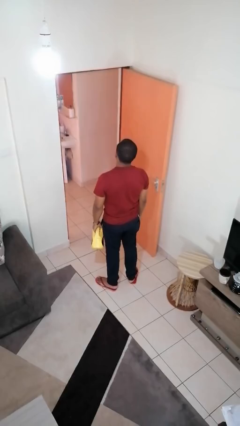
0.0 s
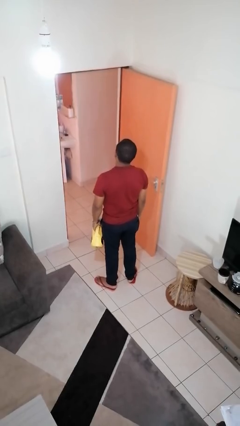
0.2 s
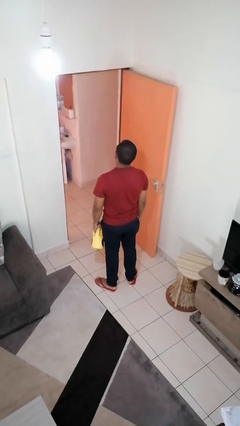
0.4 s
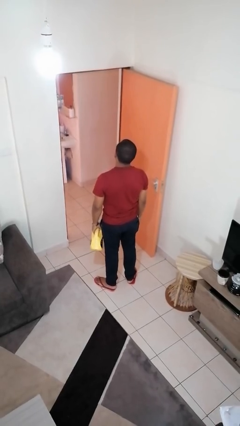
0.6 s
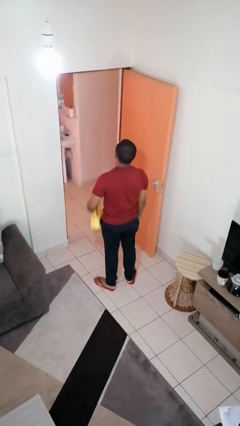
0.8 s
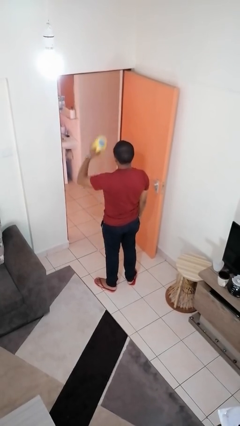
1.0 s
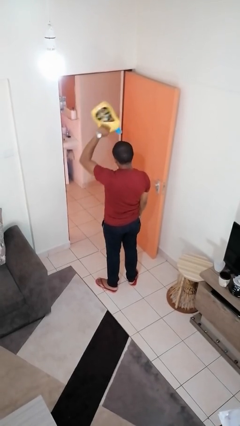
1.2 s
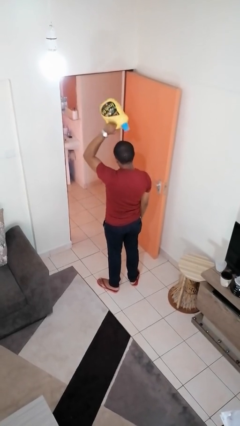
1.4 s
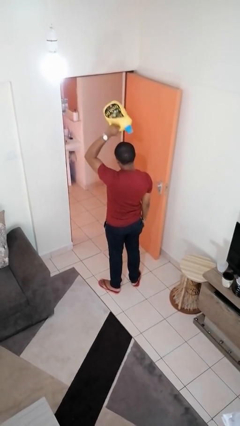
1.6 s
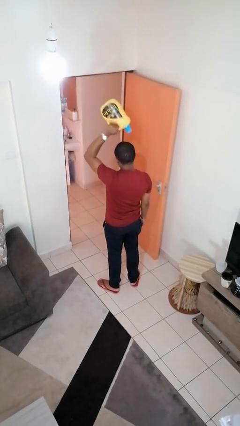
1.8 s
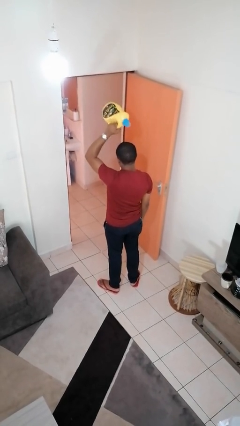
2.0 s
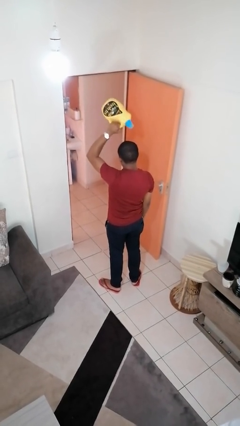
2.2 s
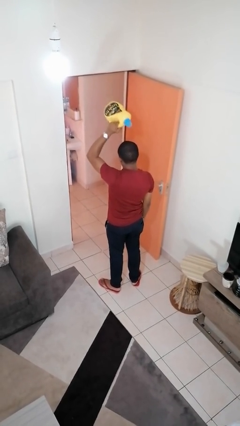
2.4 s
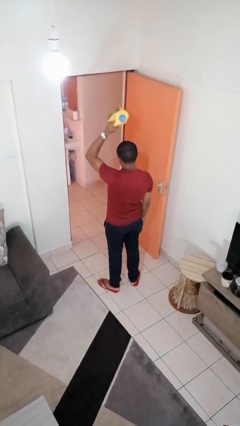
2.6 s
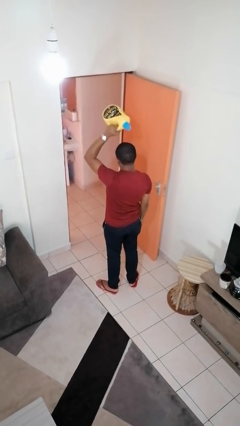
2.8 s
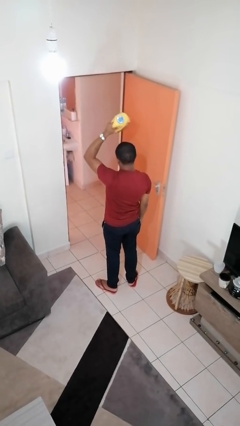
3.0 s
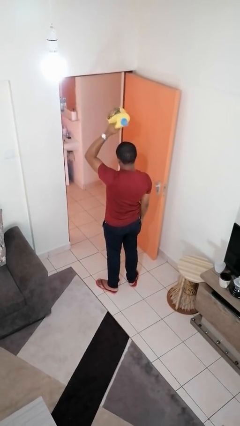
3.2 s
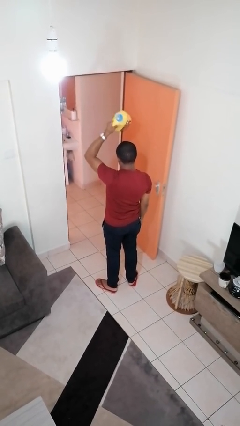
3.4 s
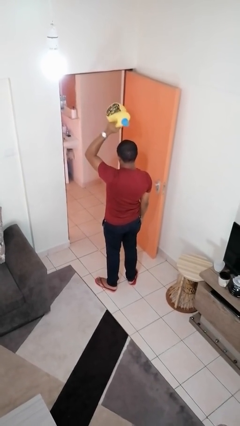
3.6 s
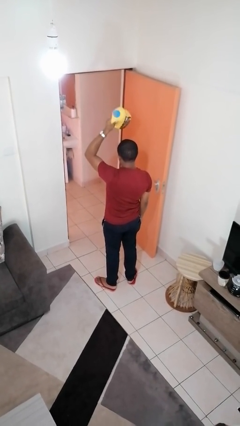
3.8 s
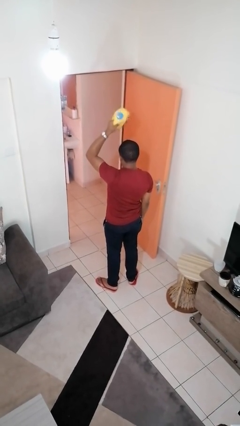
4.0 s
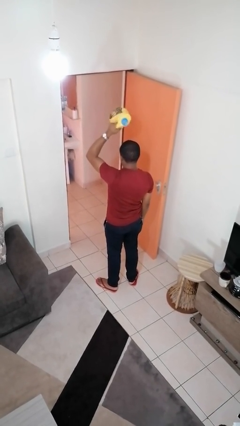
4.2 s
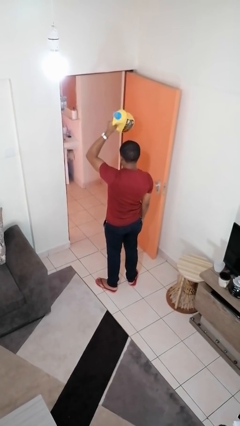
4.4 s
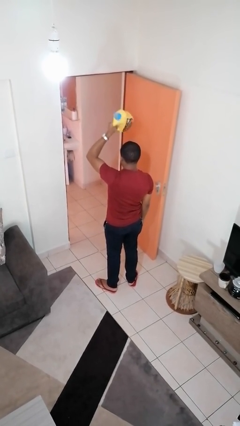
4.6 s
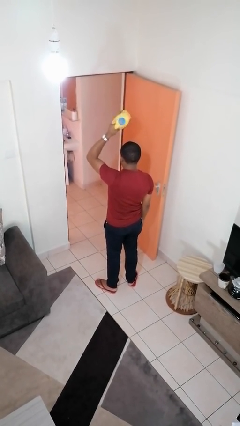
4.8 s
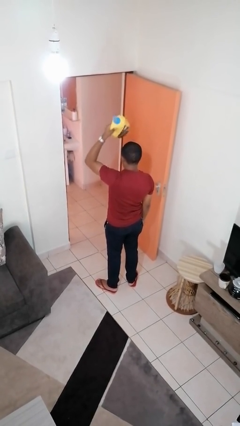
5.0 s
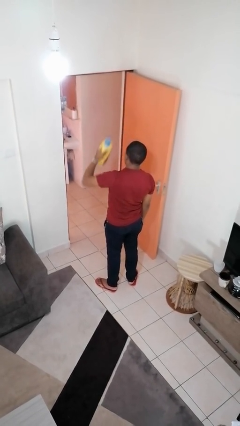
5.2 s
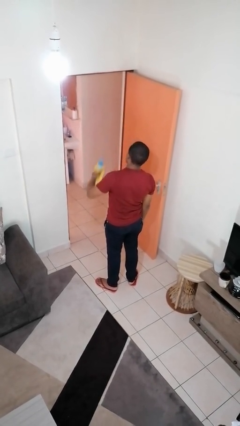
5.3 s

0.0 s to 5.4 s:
person holds object above head

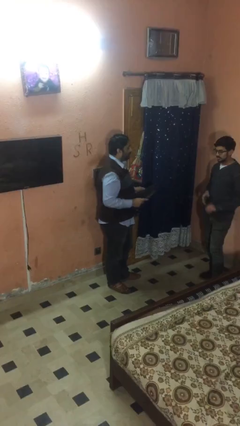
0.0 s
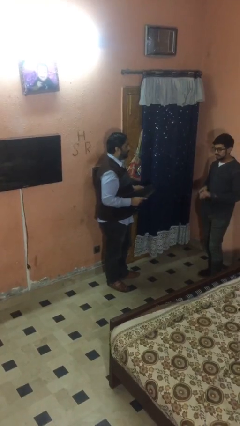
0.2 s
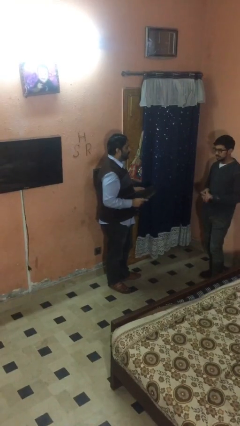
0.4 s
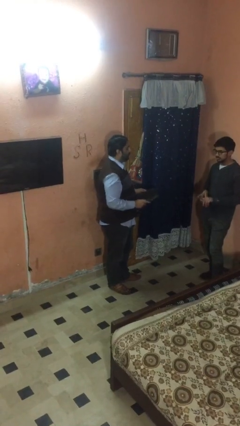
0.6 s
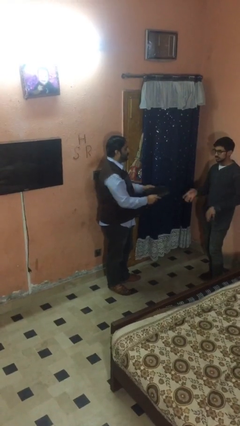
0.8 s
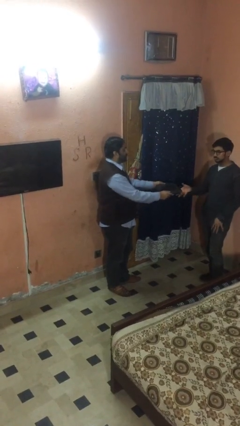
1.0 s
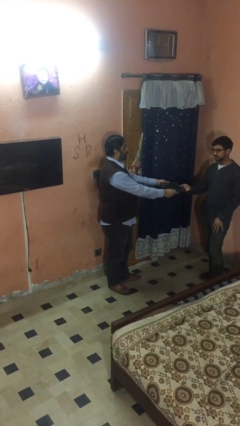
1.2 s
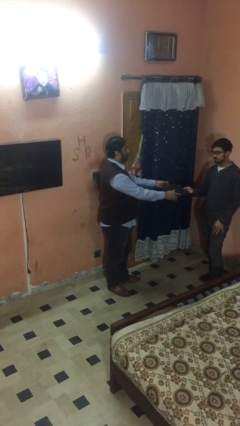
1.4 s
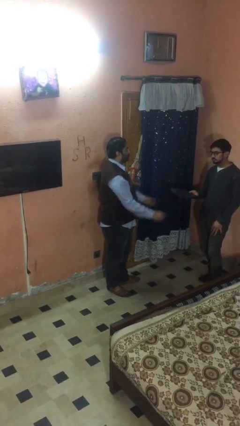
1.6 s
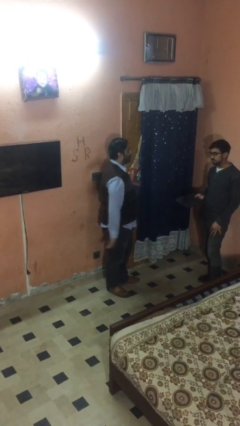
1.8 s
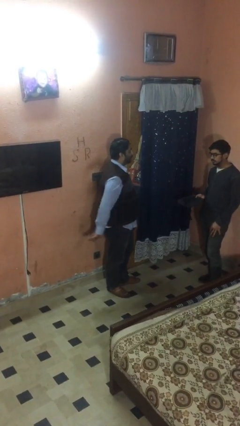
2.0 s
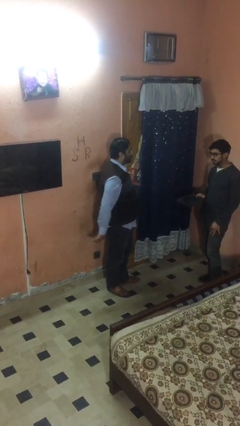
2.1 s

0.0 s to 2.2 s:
person transfers object to person

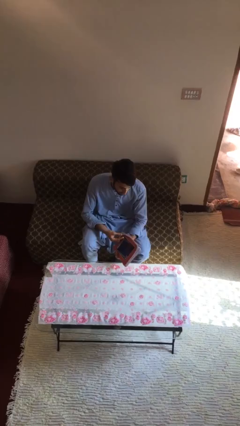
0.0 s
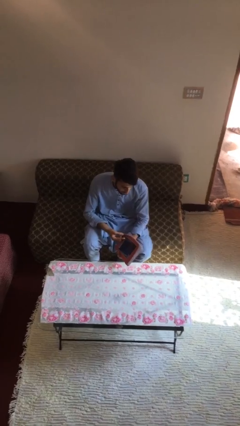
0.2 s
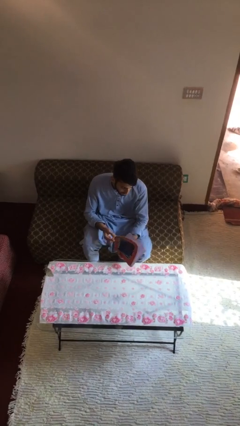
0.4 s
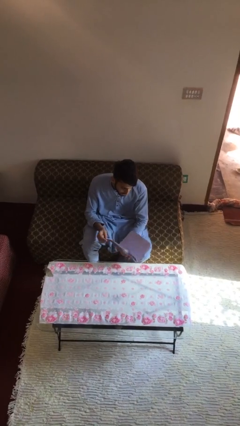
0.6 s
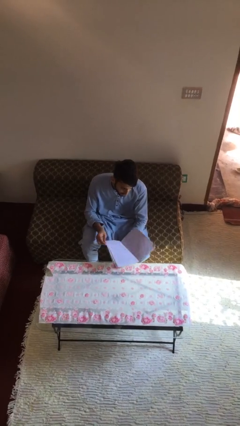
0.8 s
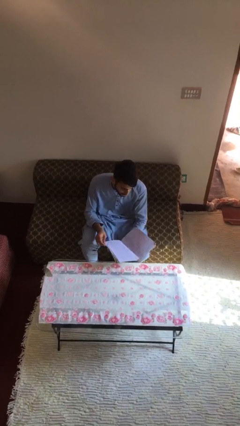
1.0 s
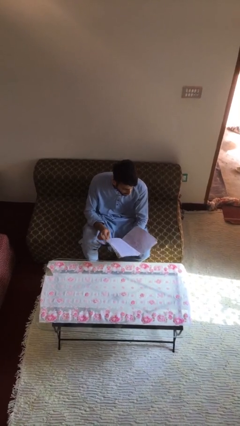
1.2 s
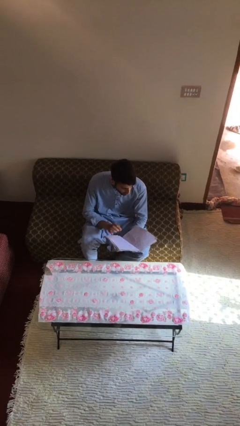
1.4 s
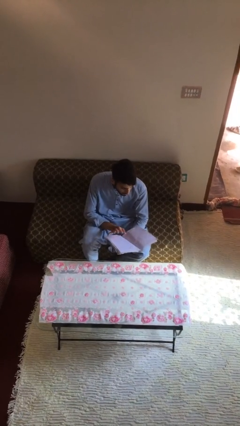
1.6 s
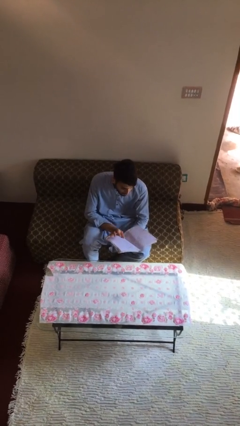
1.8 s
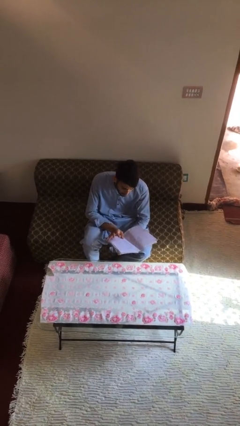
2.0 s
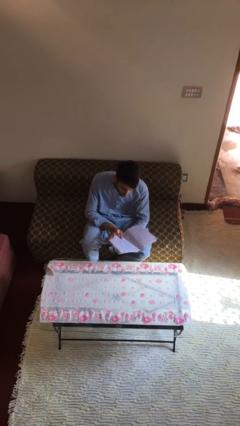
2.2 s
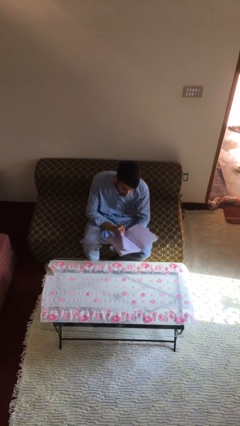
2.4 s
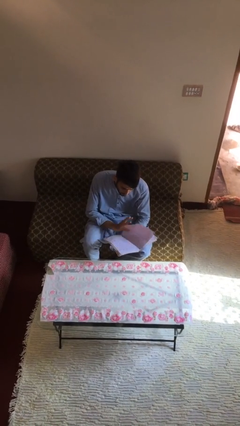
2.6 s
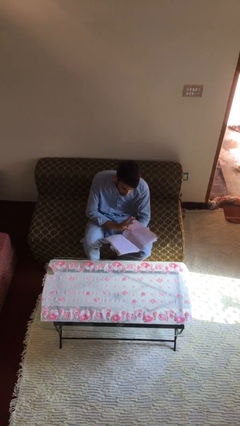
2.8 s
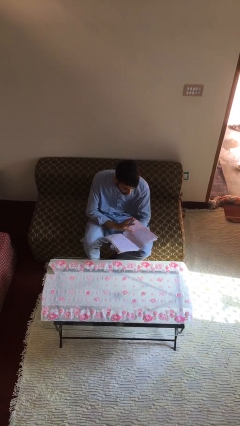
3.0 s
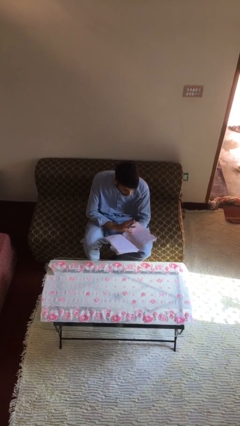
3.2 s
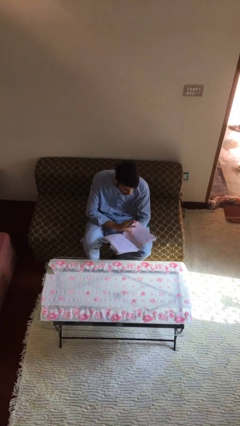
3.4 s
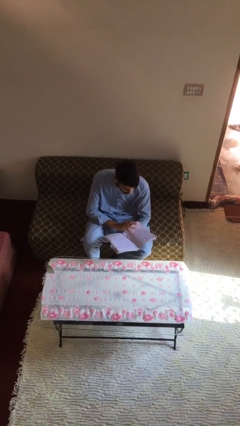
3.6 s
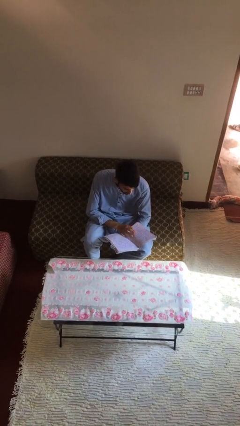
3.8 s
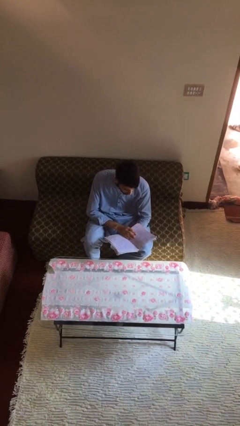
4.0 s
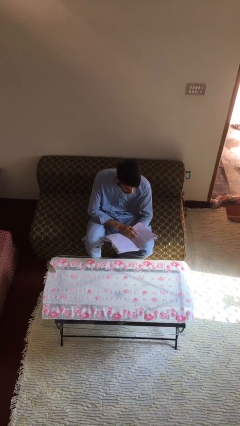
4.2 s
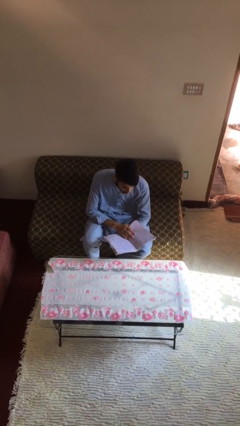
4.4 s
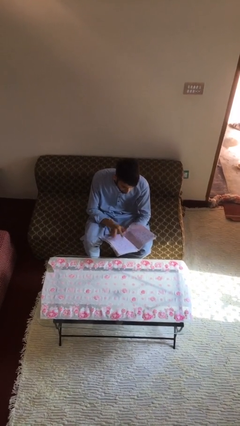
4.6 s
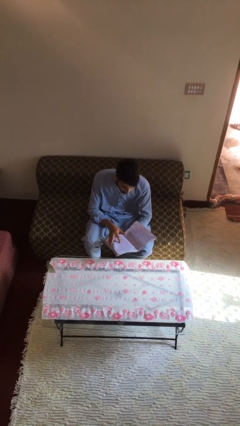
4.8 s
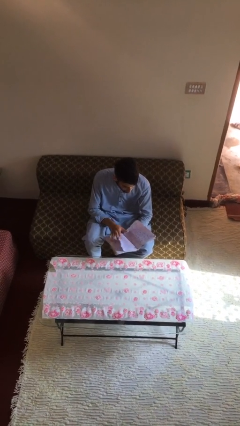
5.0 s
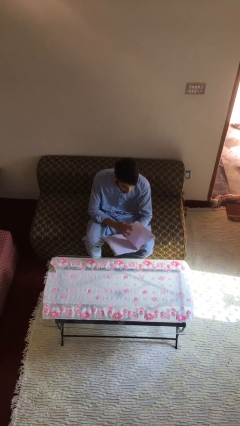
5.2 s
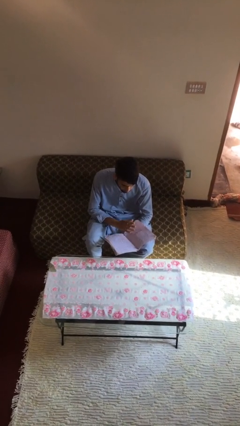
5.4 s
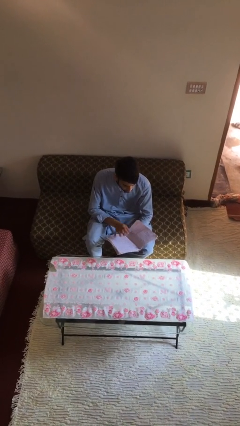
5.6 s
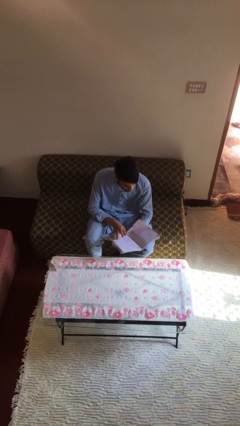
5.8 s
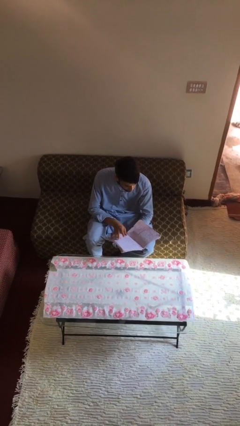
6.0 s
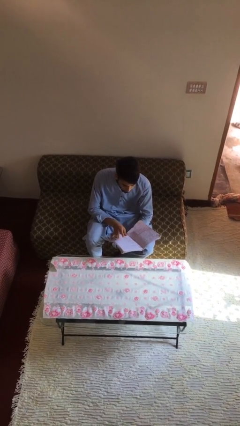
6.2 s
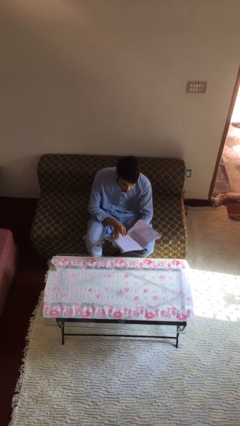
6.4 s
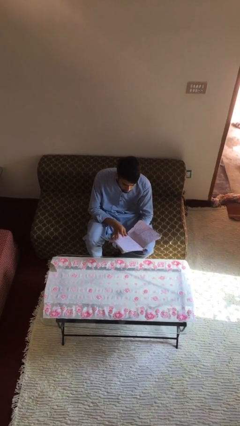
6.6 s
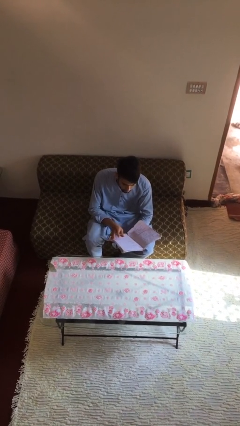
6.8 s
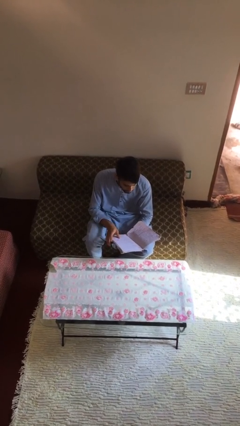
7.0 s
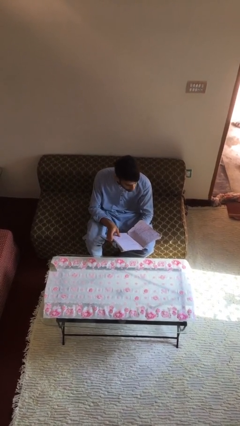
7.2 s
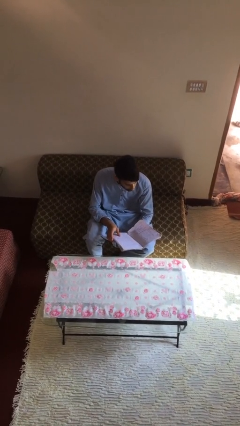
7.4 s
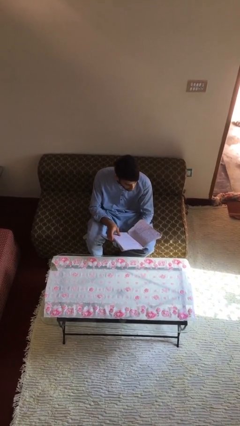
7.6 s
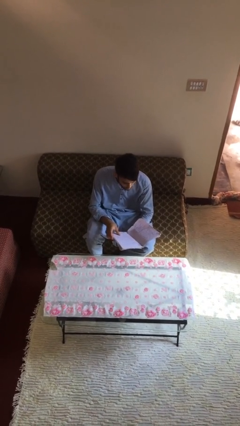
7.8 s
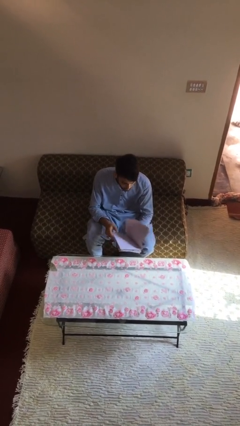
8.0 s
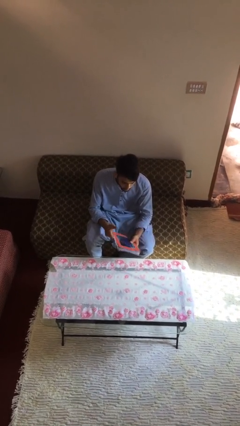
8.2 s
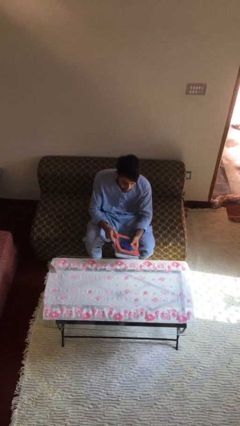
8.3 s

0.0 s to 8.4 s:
person reads document

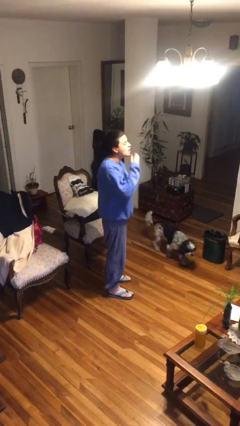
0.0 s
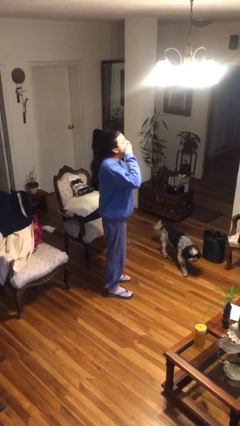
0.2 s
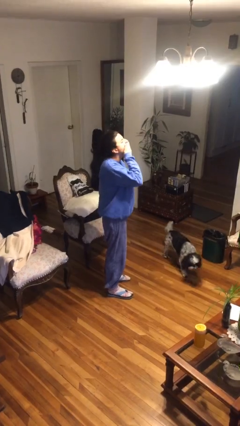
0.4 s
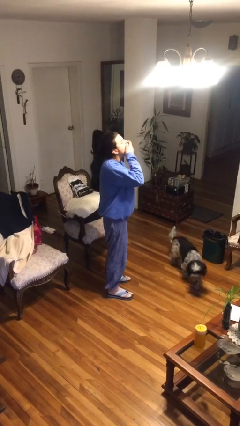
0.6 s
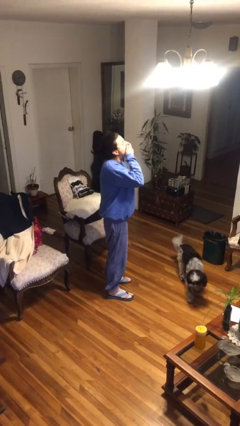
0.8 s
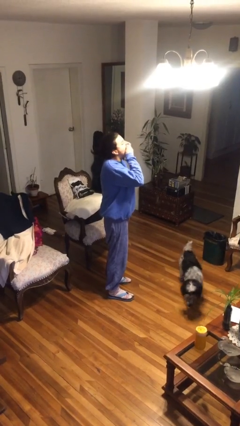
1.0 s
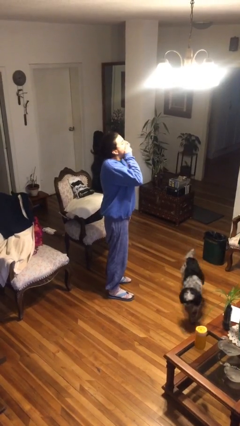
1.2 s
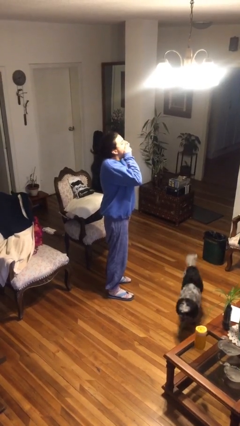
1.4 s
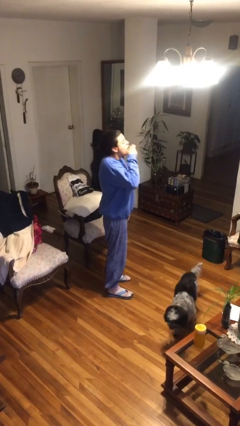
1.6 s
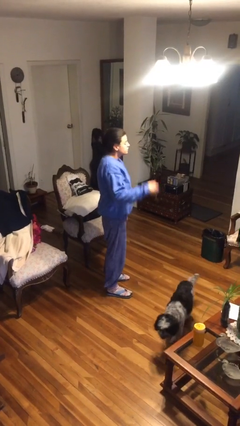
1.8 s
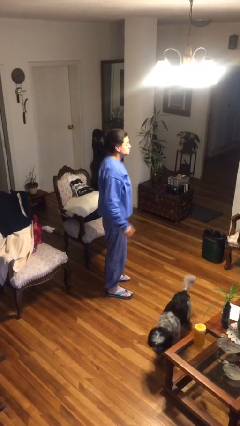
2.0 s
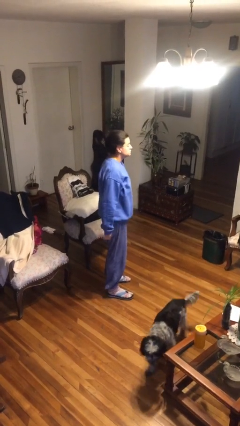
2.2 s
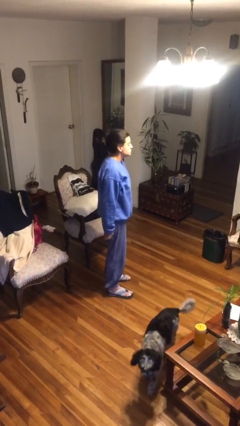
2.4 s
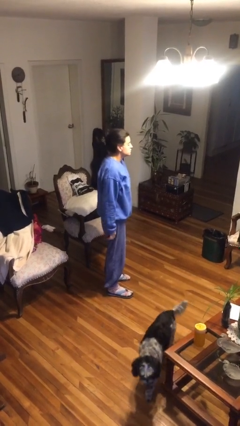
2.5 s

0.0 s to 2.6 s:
person yawns
